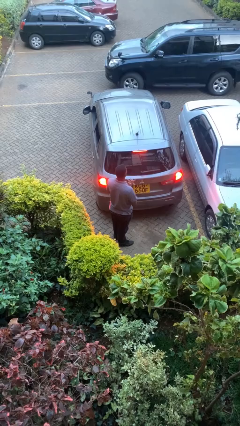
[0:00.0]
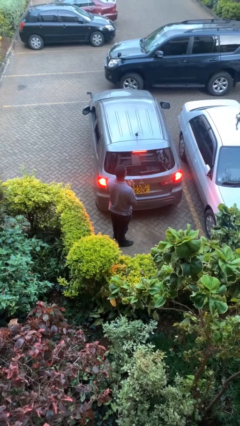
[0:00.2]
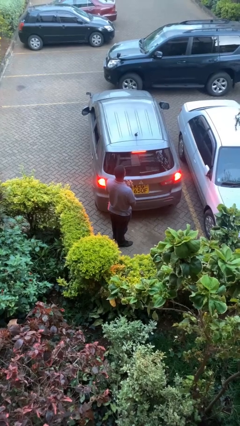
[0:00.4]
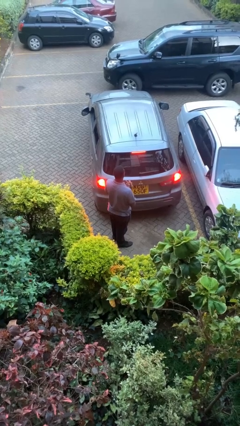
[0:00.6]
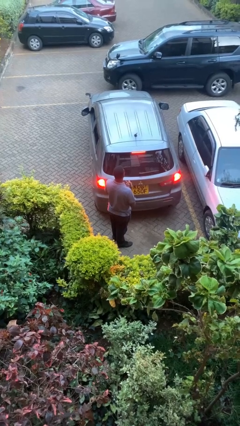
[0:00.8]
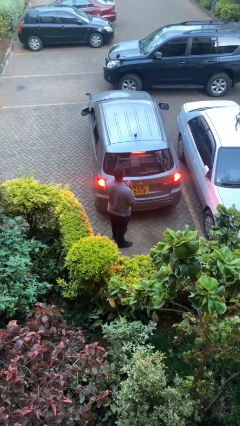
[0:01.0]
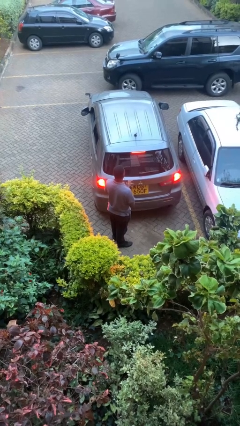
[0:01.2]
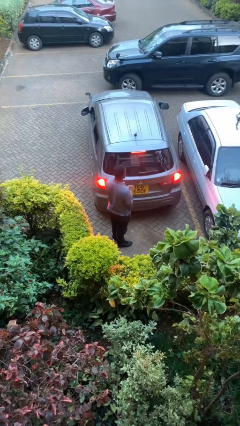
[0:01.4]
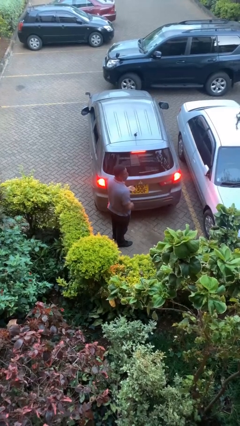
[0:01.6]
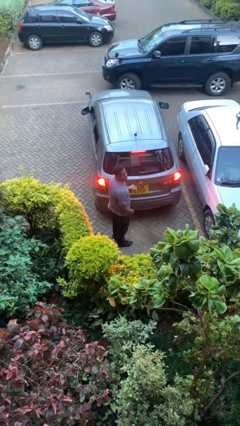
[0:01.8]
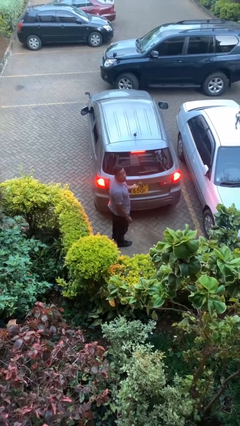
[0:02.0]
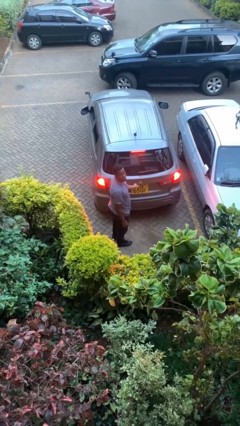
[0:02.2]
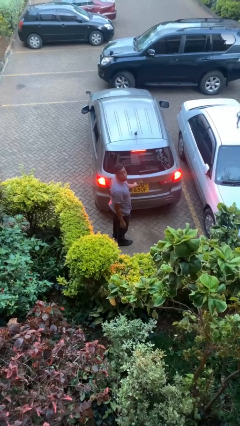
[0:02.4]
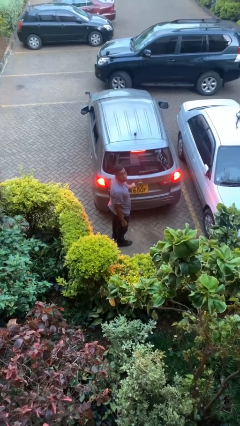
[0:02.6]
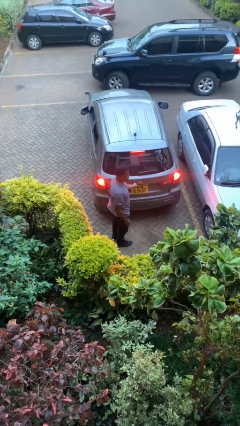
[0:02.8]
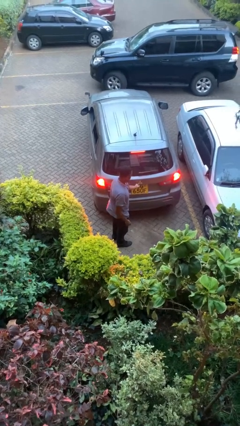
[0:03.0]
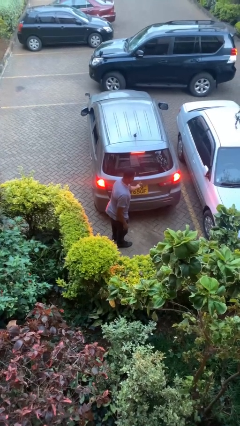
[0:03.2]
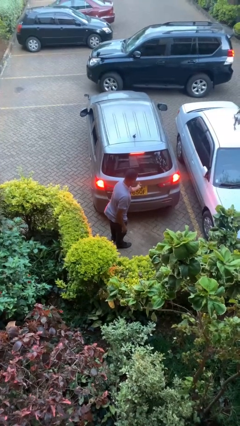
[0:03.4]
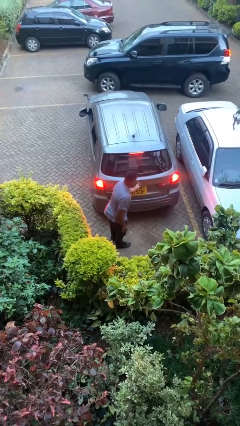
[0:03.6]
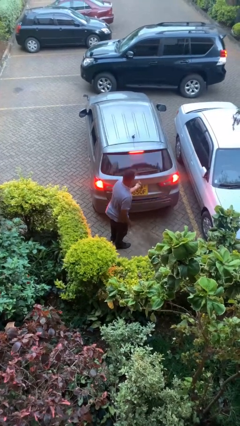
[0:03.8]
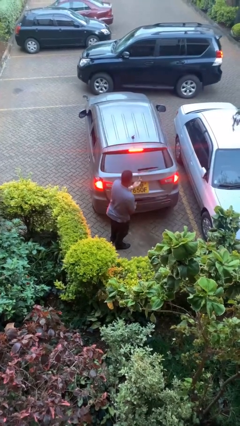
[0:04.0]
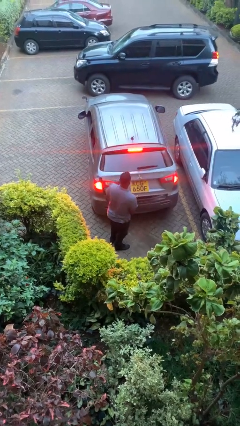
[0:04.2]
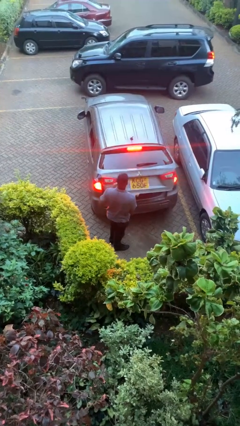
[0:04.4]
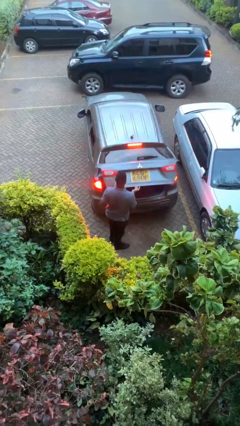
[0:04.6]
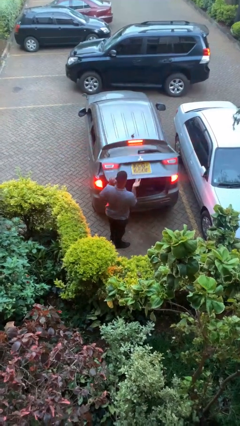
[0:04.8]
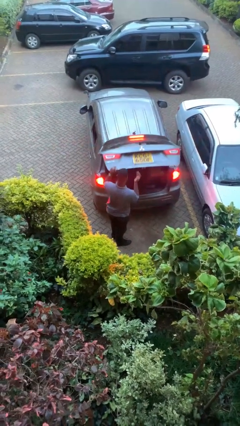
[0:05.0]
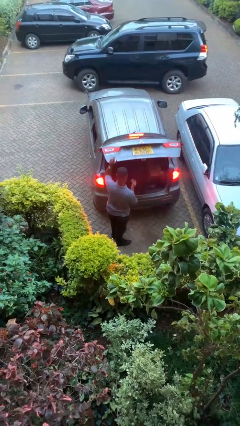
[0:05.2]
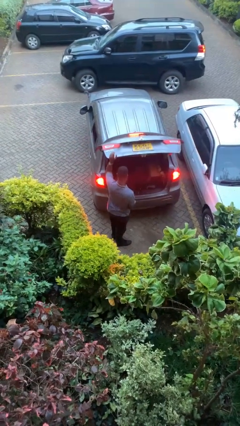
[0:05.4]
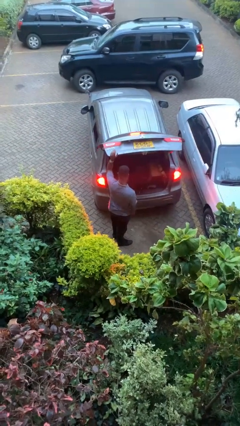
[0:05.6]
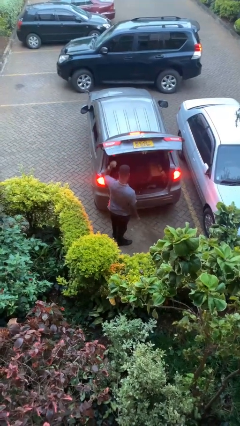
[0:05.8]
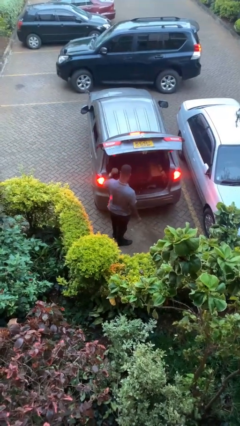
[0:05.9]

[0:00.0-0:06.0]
person opens car trunk

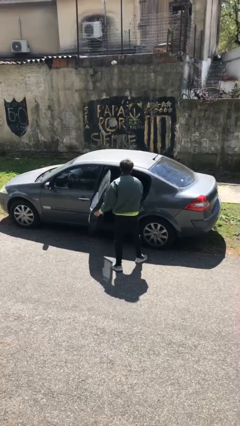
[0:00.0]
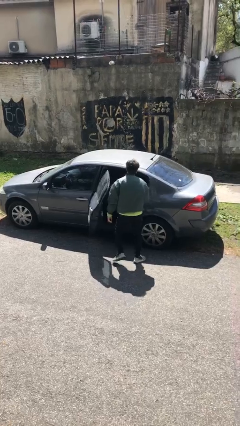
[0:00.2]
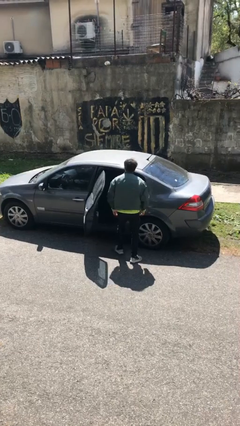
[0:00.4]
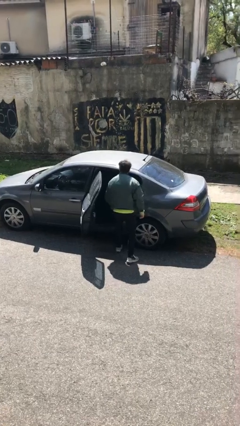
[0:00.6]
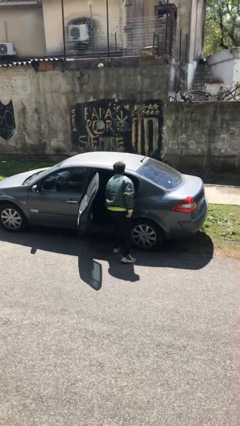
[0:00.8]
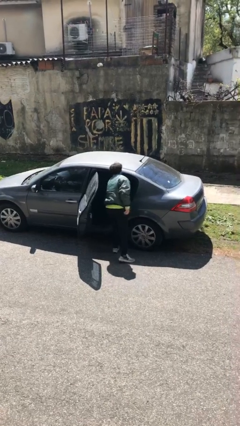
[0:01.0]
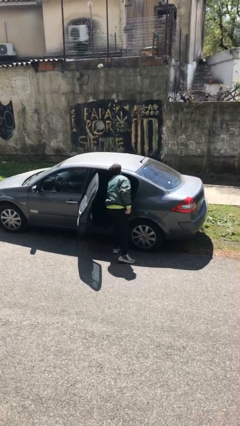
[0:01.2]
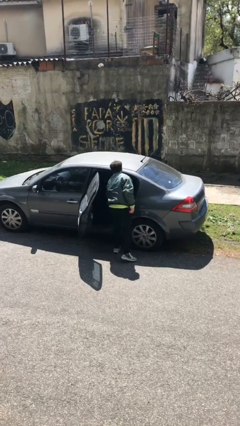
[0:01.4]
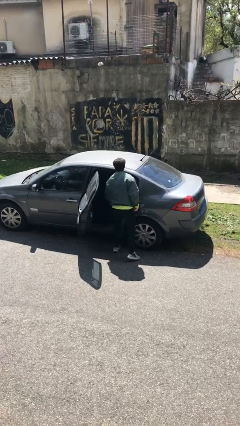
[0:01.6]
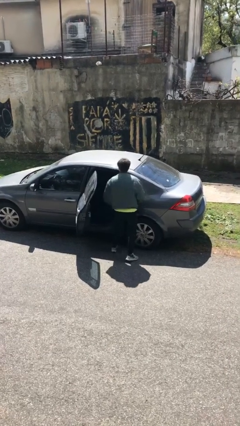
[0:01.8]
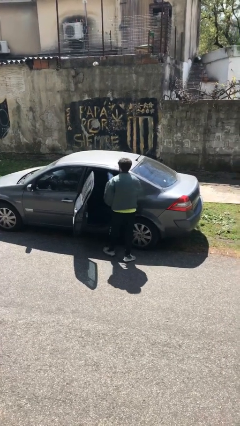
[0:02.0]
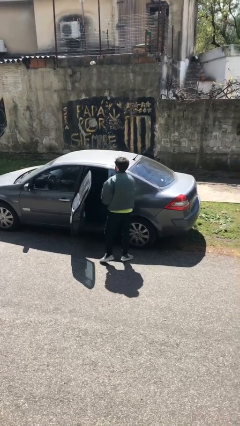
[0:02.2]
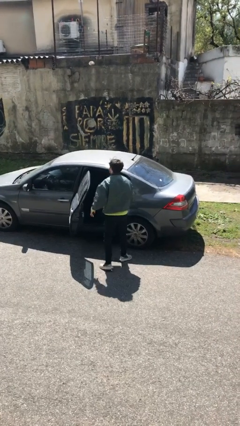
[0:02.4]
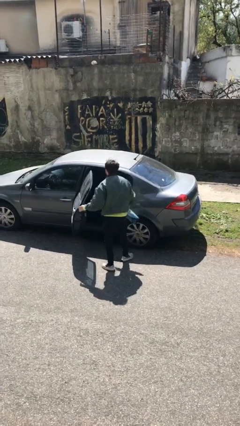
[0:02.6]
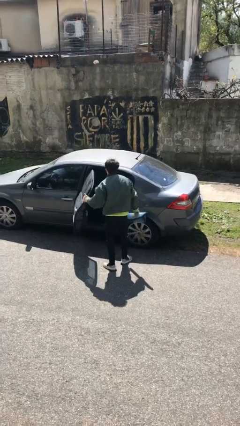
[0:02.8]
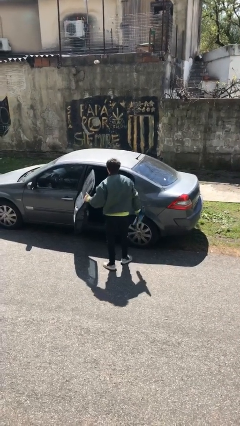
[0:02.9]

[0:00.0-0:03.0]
person unloads car

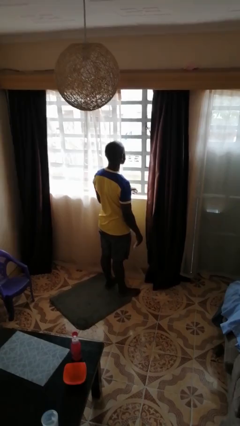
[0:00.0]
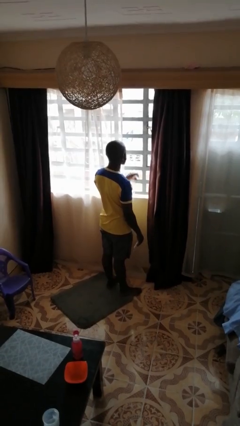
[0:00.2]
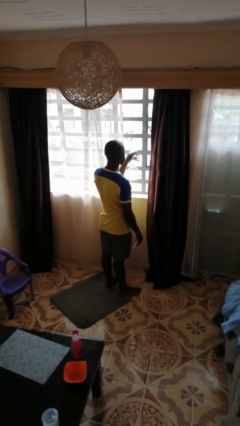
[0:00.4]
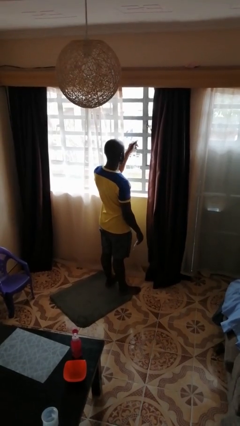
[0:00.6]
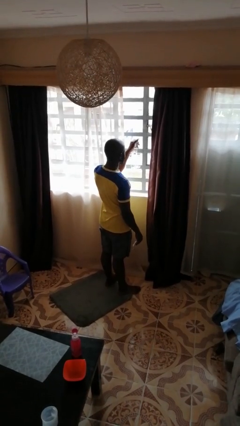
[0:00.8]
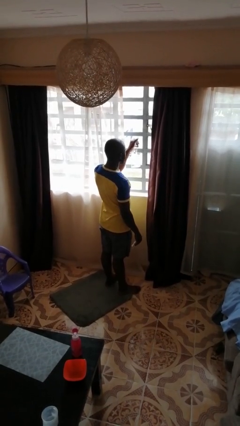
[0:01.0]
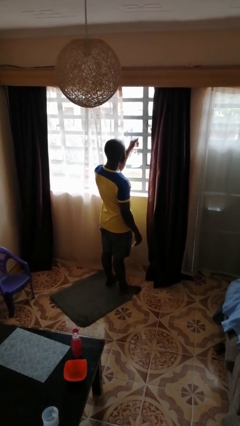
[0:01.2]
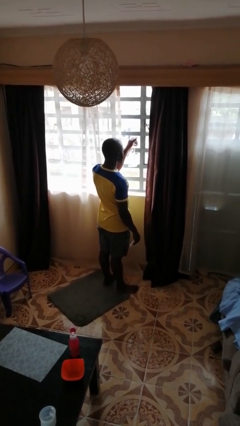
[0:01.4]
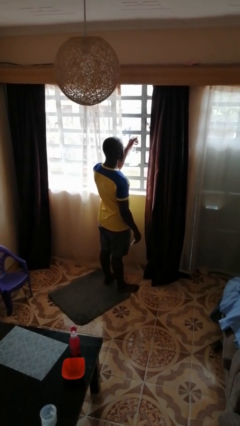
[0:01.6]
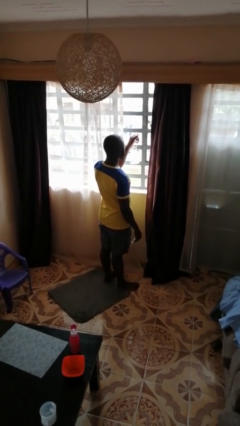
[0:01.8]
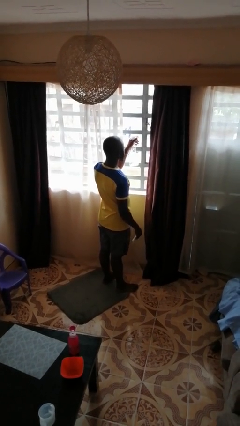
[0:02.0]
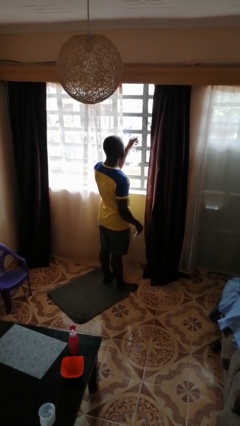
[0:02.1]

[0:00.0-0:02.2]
person sprays from bottle

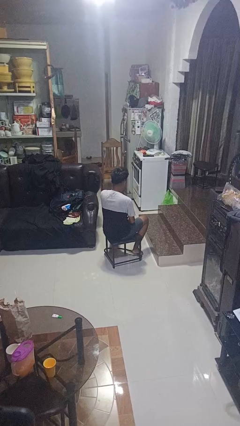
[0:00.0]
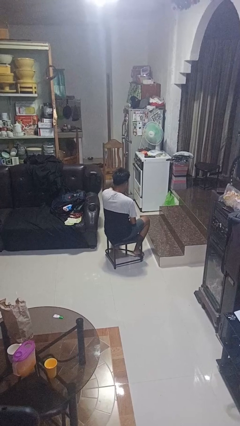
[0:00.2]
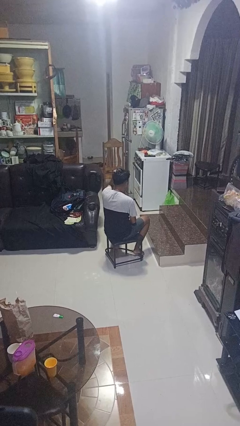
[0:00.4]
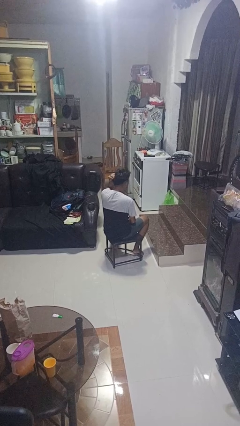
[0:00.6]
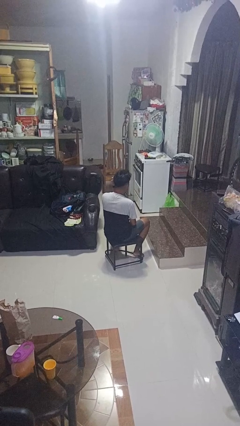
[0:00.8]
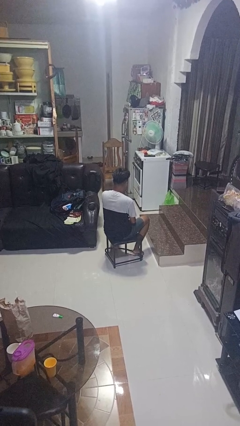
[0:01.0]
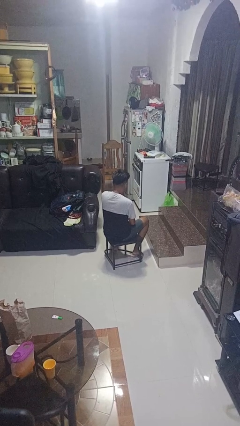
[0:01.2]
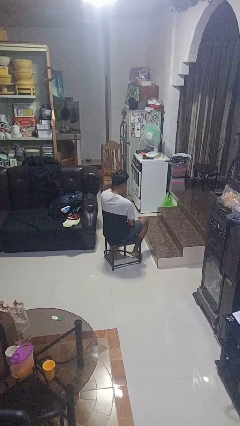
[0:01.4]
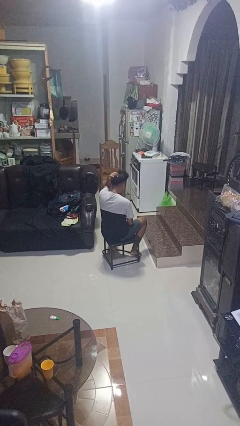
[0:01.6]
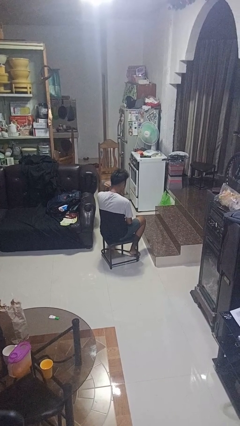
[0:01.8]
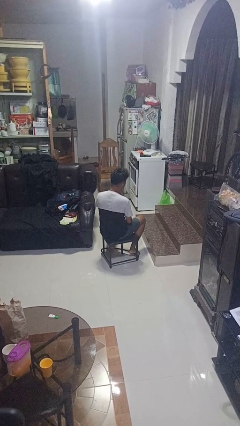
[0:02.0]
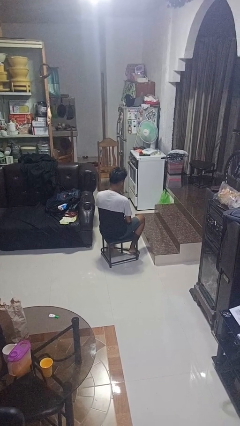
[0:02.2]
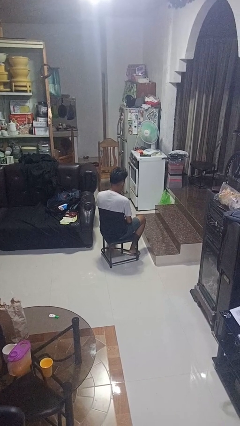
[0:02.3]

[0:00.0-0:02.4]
person strokes hair

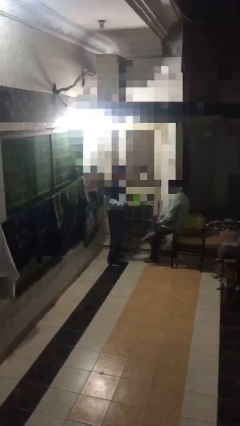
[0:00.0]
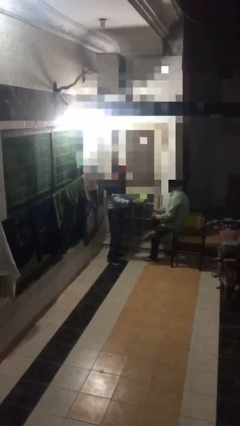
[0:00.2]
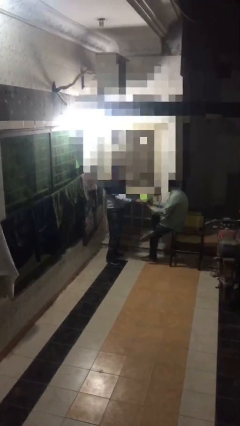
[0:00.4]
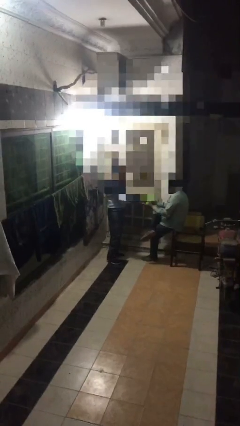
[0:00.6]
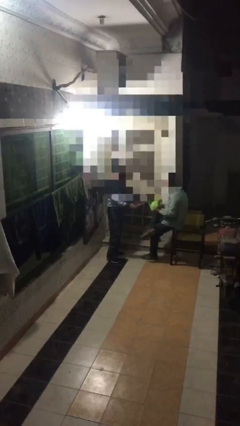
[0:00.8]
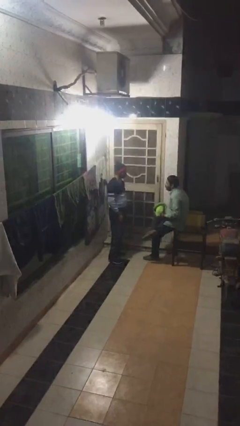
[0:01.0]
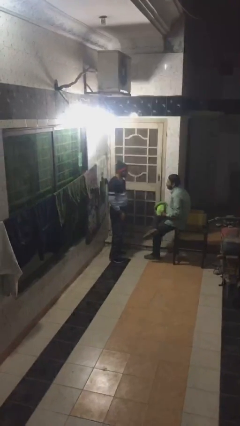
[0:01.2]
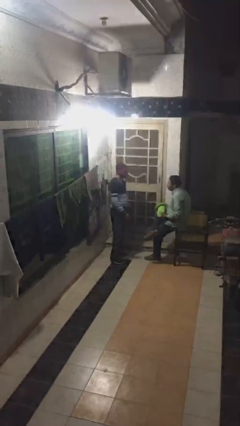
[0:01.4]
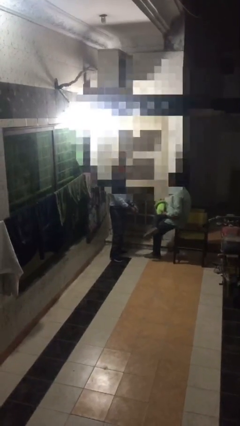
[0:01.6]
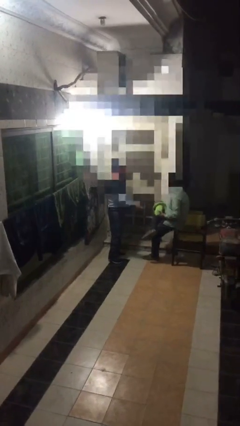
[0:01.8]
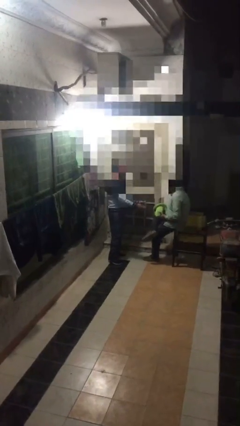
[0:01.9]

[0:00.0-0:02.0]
person transfers object to person

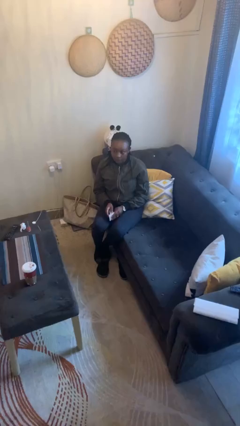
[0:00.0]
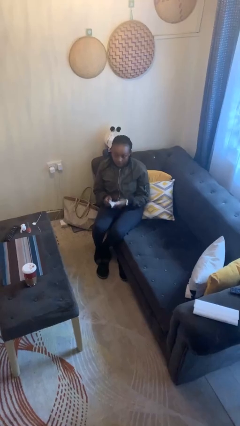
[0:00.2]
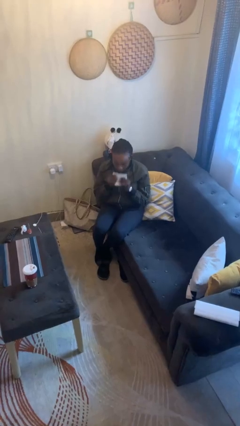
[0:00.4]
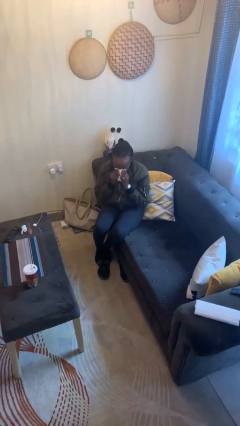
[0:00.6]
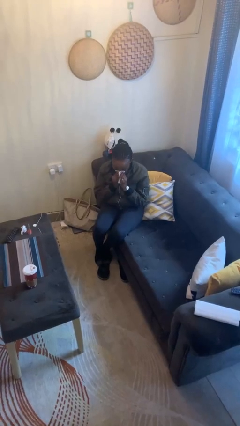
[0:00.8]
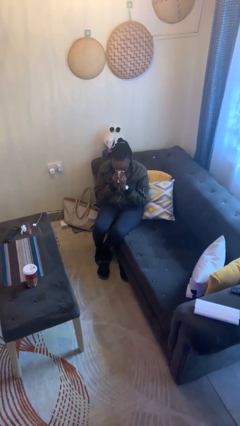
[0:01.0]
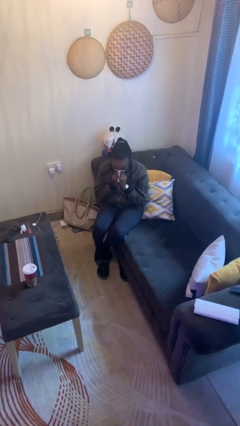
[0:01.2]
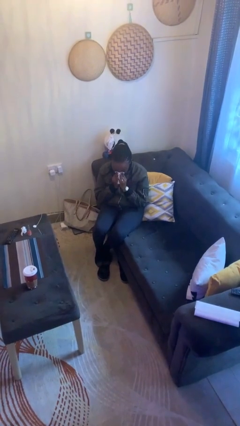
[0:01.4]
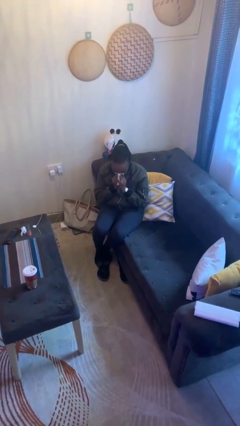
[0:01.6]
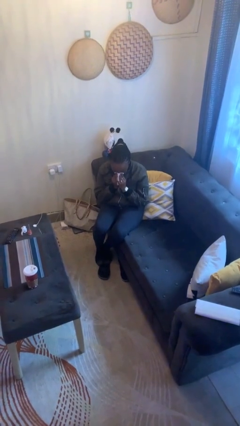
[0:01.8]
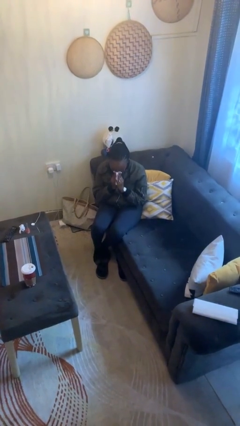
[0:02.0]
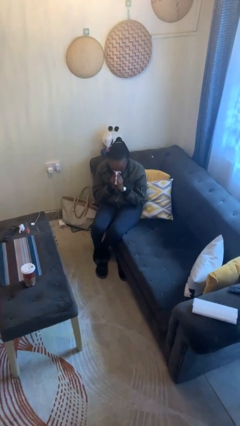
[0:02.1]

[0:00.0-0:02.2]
person blows nose
